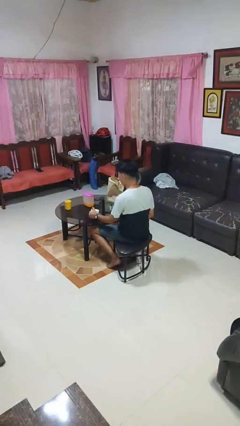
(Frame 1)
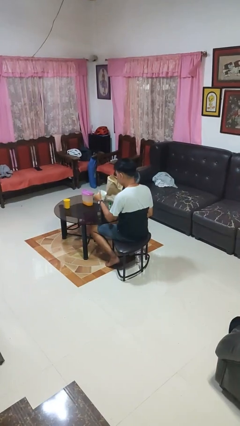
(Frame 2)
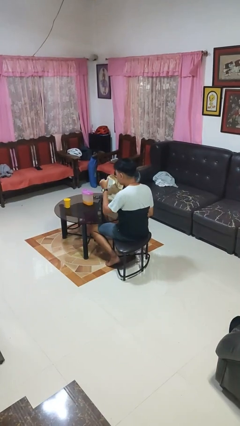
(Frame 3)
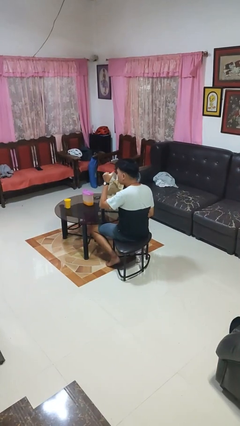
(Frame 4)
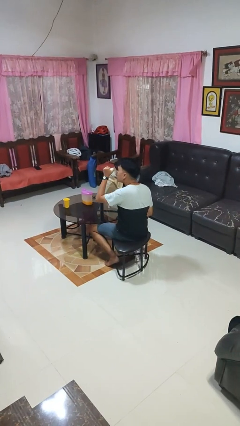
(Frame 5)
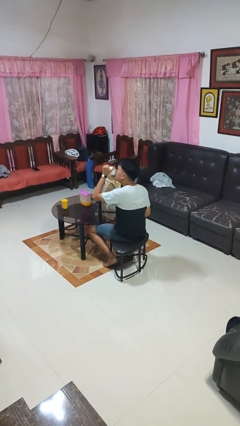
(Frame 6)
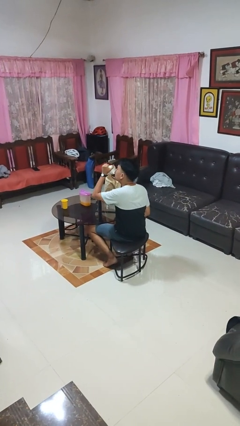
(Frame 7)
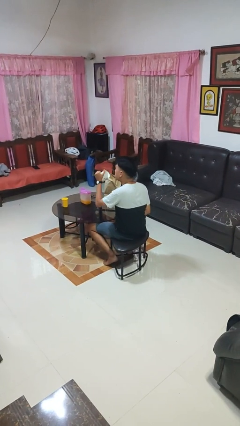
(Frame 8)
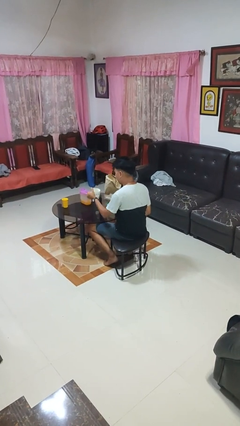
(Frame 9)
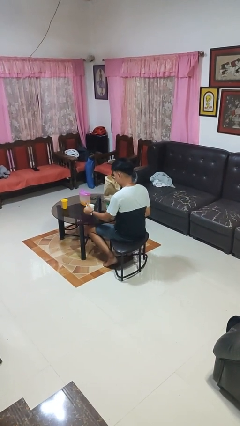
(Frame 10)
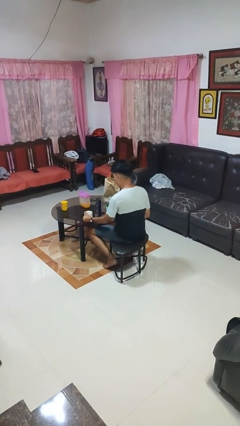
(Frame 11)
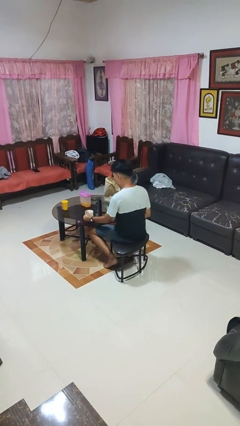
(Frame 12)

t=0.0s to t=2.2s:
person drinks from mug

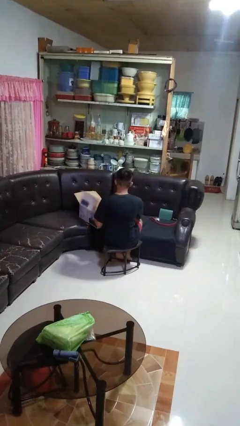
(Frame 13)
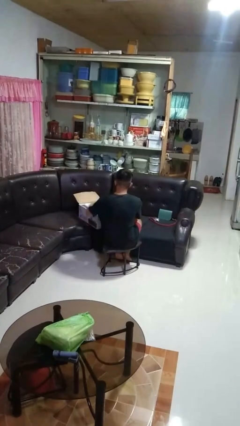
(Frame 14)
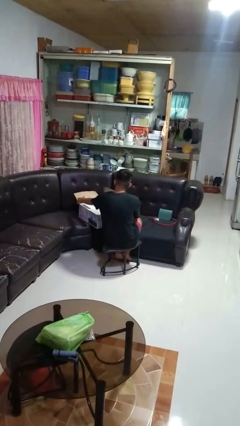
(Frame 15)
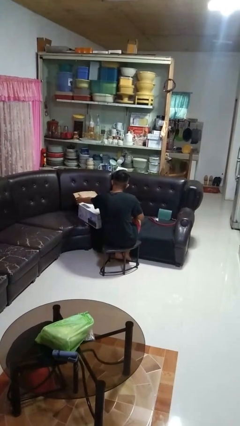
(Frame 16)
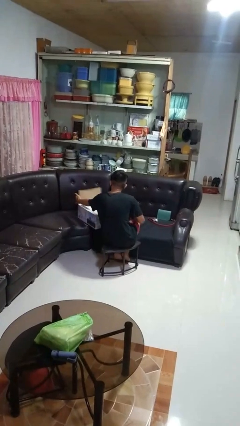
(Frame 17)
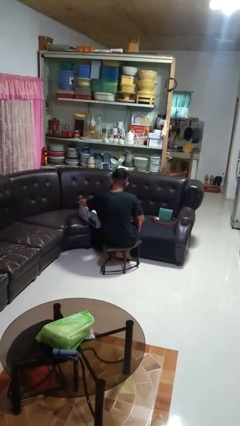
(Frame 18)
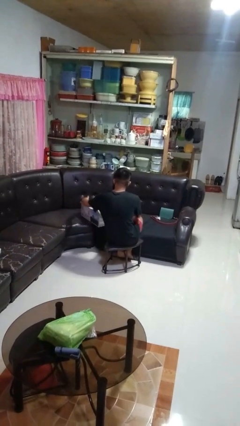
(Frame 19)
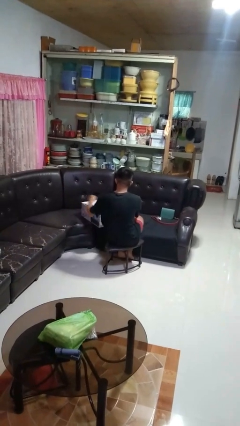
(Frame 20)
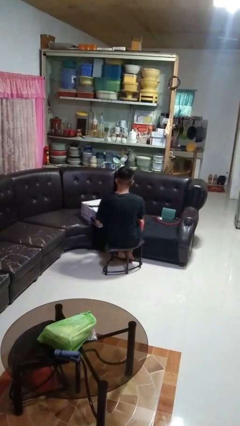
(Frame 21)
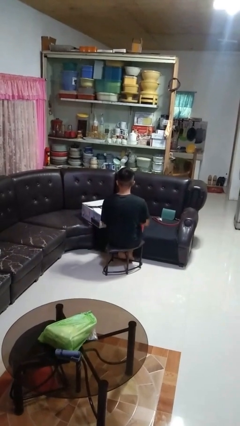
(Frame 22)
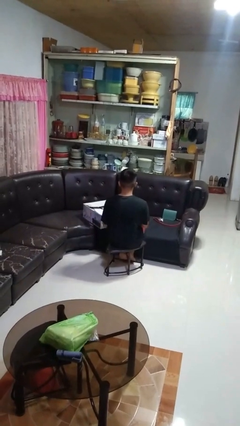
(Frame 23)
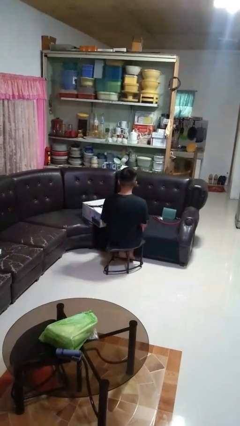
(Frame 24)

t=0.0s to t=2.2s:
person closes box

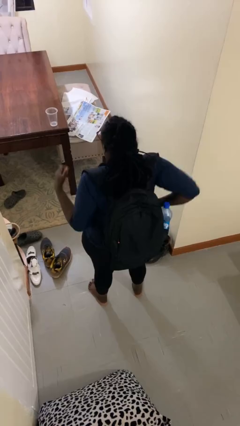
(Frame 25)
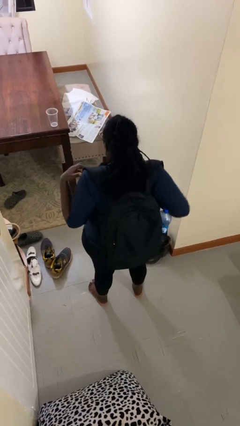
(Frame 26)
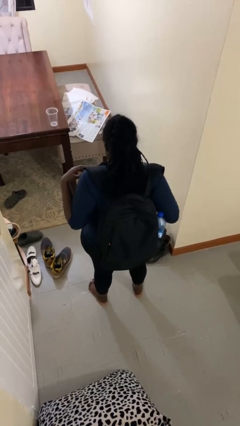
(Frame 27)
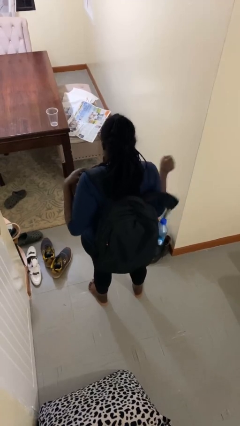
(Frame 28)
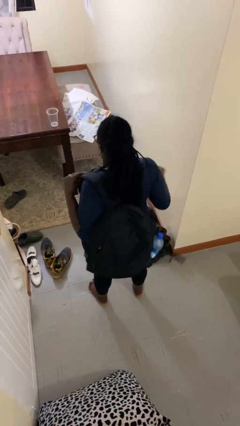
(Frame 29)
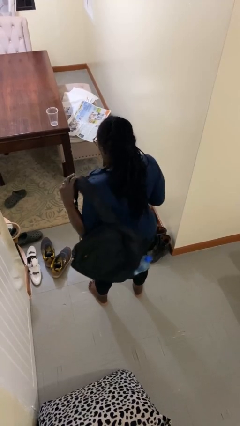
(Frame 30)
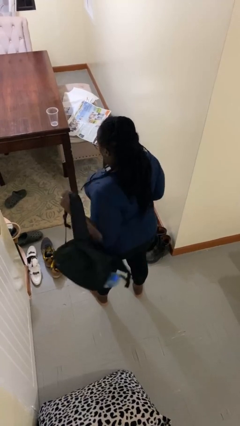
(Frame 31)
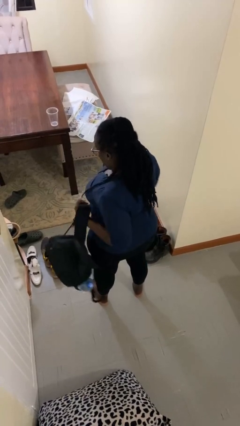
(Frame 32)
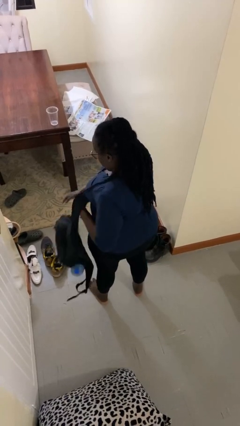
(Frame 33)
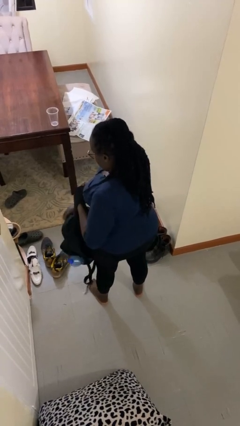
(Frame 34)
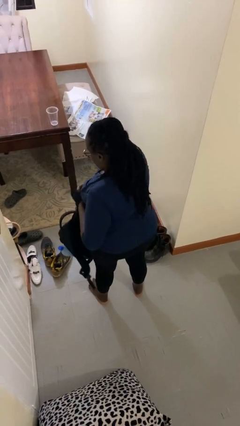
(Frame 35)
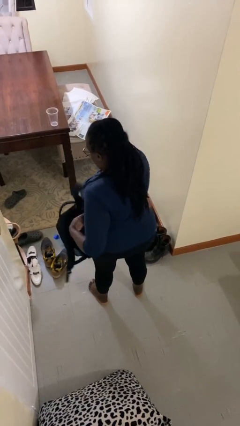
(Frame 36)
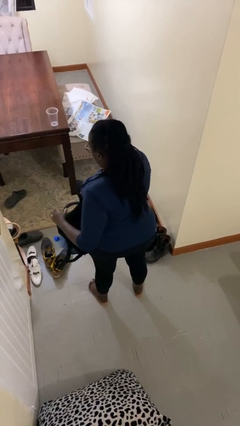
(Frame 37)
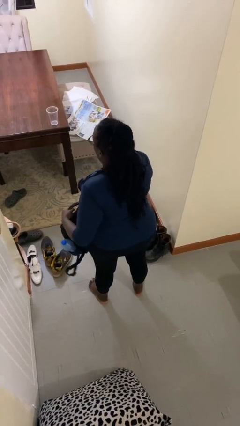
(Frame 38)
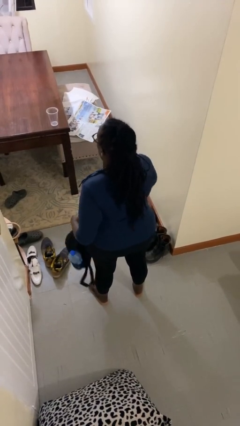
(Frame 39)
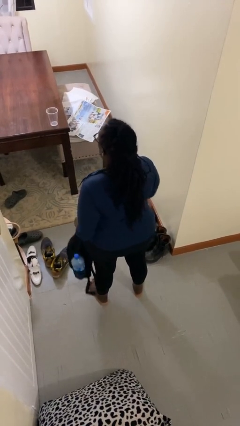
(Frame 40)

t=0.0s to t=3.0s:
person takes off backpack

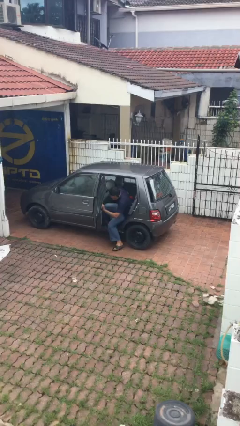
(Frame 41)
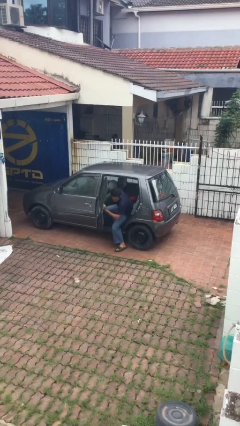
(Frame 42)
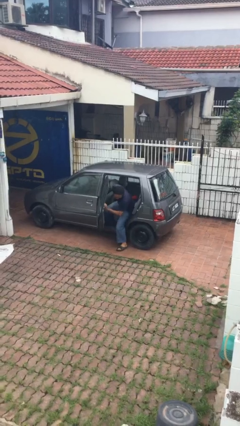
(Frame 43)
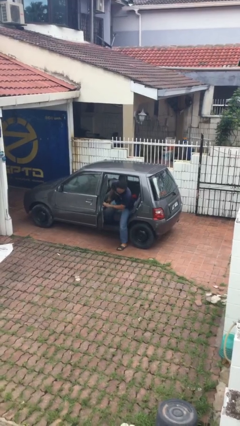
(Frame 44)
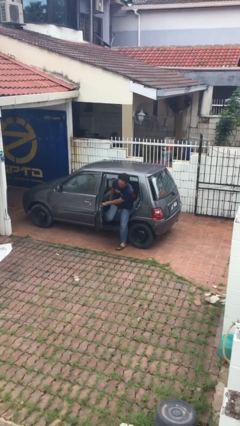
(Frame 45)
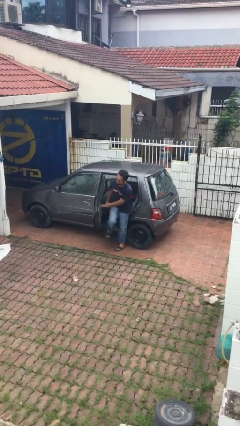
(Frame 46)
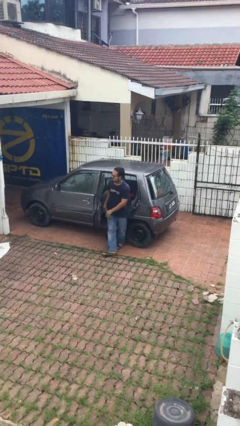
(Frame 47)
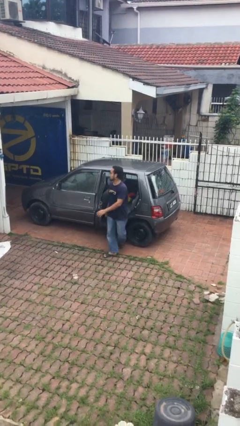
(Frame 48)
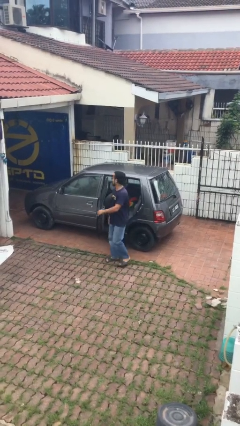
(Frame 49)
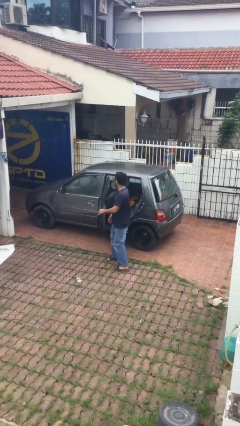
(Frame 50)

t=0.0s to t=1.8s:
person exits car

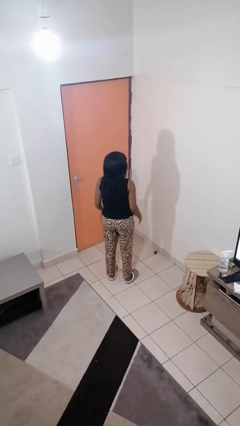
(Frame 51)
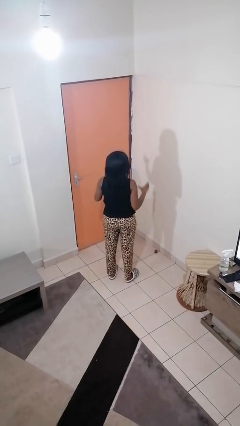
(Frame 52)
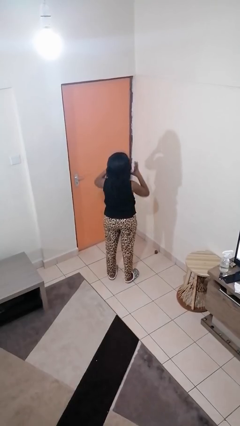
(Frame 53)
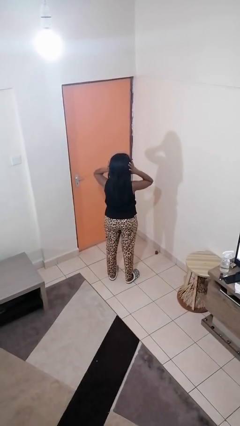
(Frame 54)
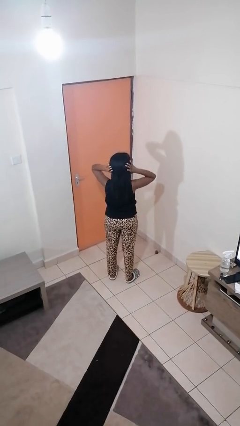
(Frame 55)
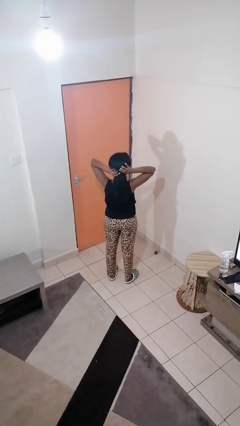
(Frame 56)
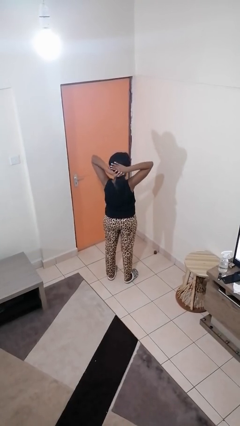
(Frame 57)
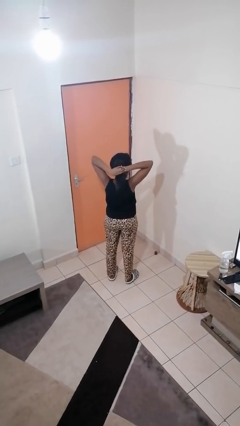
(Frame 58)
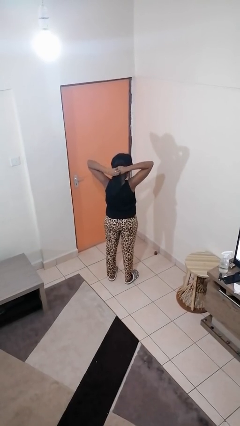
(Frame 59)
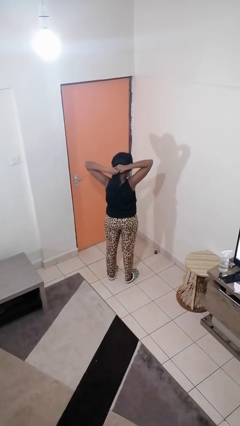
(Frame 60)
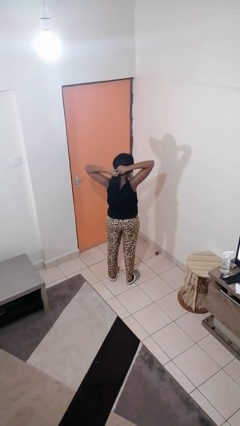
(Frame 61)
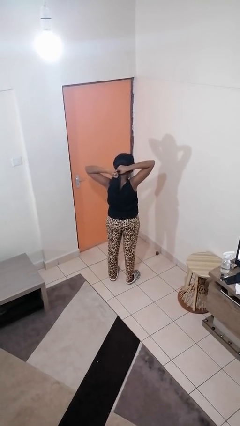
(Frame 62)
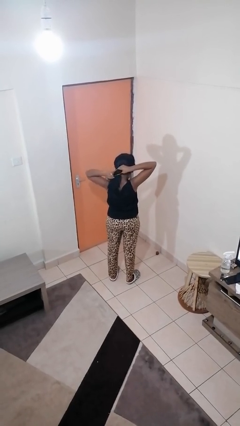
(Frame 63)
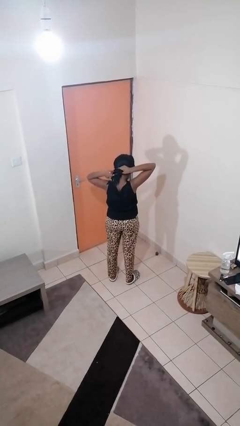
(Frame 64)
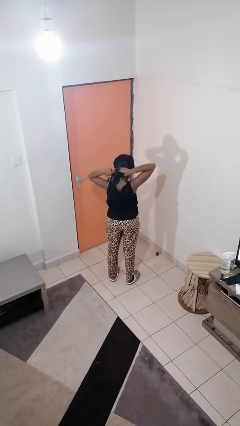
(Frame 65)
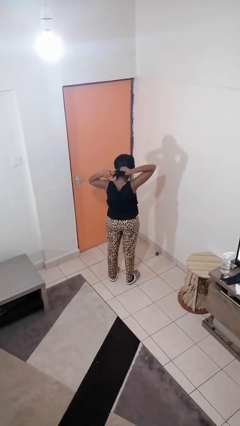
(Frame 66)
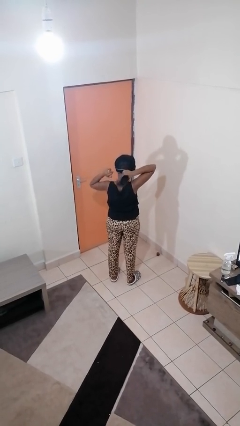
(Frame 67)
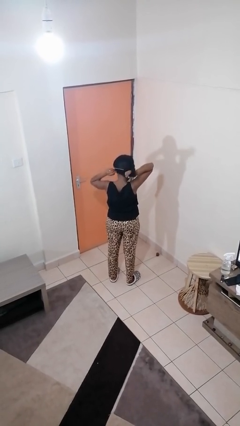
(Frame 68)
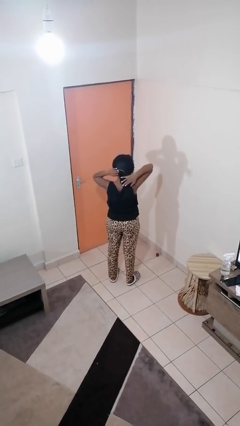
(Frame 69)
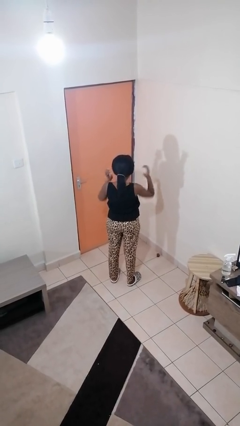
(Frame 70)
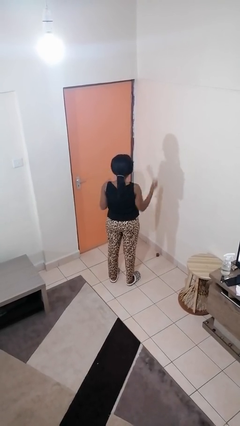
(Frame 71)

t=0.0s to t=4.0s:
person puts hair in ponytail

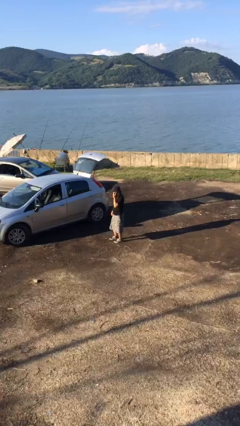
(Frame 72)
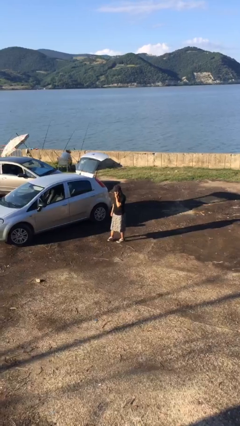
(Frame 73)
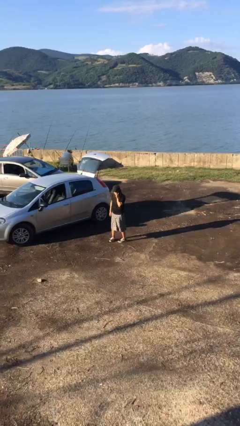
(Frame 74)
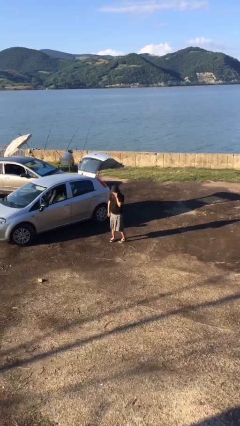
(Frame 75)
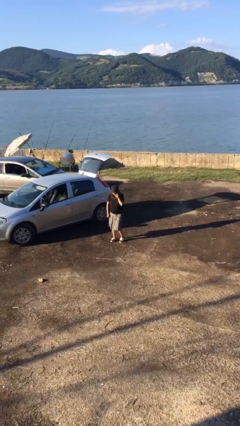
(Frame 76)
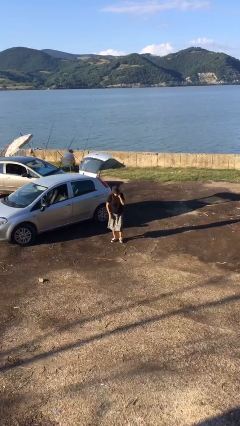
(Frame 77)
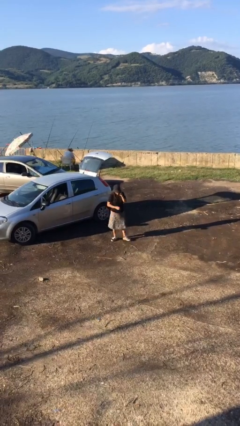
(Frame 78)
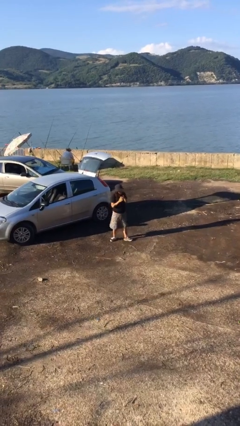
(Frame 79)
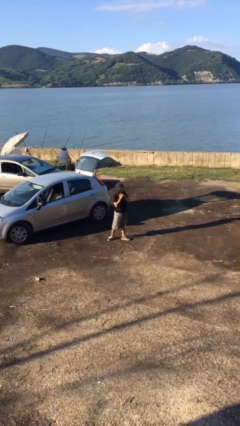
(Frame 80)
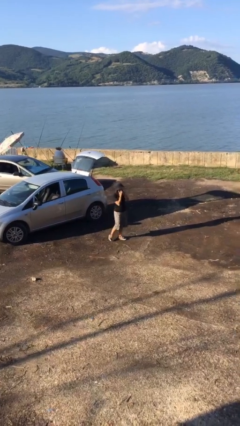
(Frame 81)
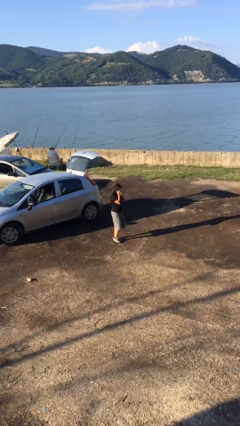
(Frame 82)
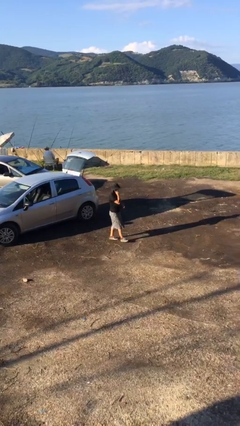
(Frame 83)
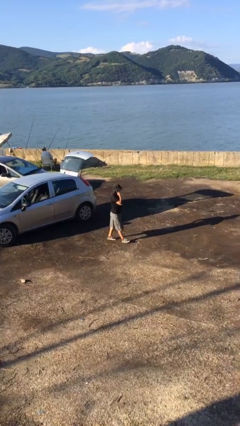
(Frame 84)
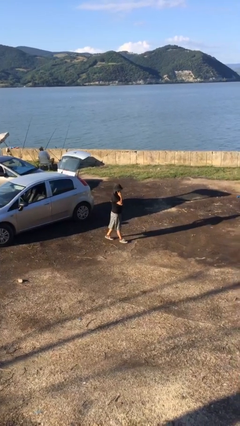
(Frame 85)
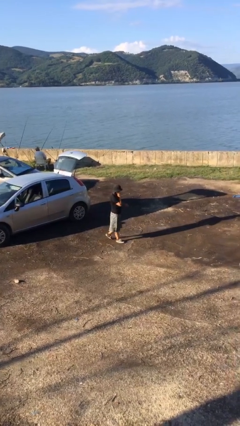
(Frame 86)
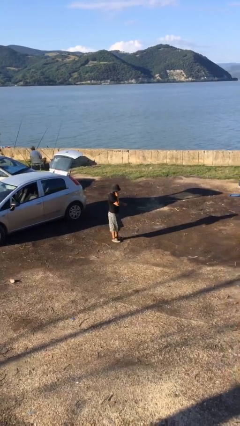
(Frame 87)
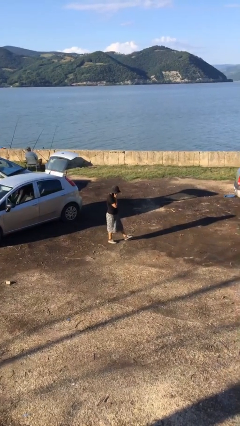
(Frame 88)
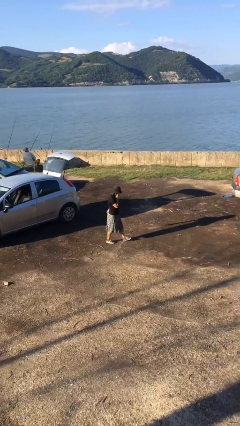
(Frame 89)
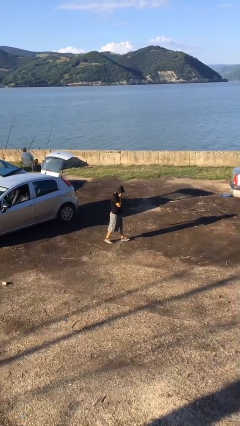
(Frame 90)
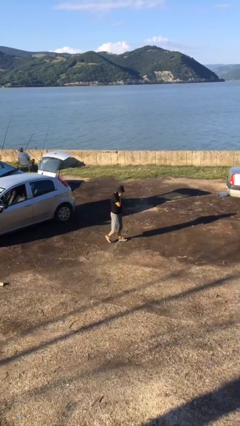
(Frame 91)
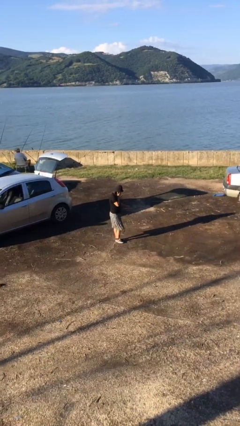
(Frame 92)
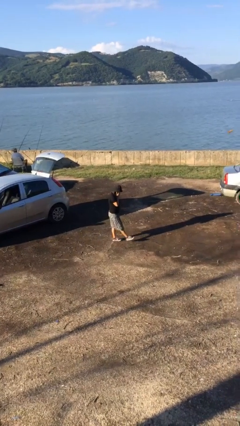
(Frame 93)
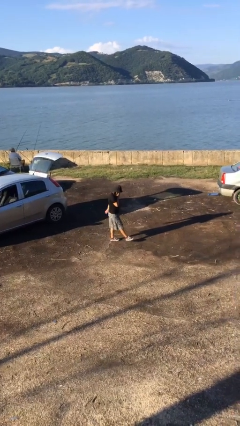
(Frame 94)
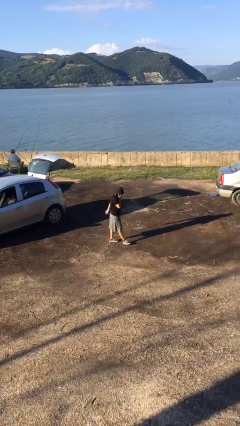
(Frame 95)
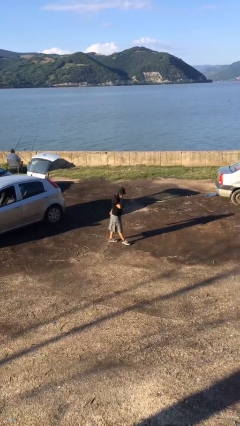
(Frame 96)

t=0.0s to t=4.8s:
person talks on phone
